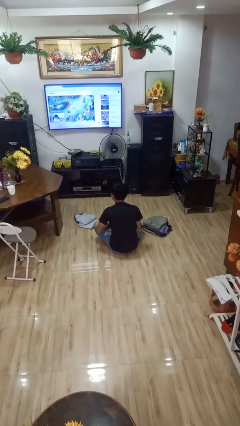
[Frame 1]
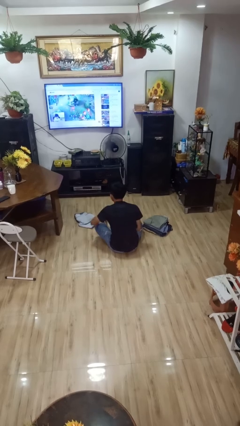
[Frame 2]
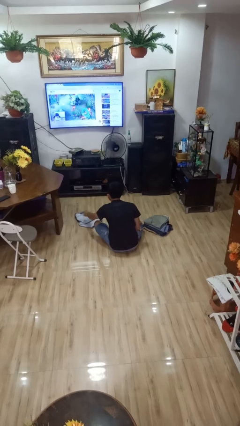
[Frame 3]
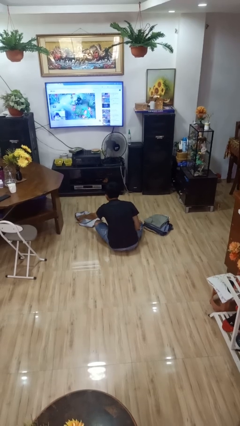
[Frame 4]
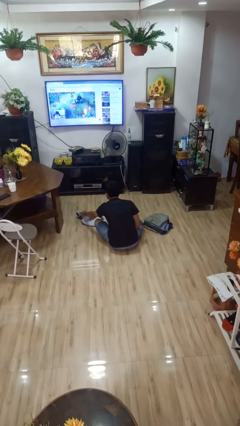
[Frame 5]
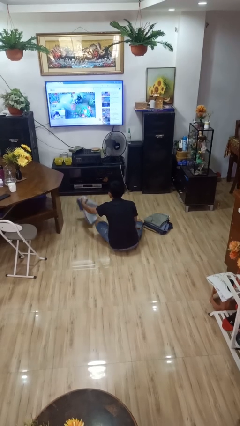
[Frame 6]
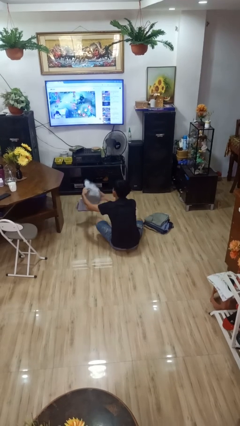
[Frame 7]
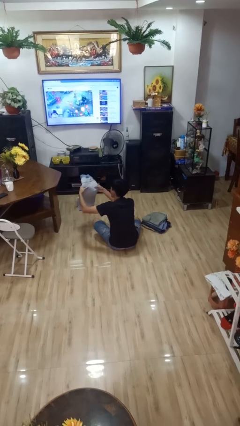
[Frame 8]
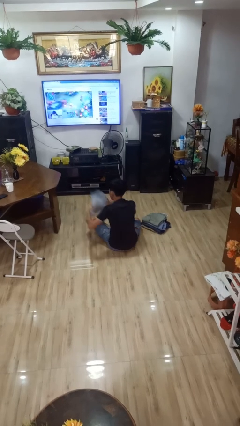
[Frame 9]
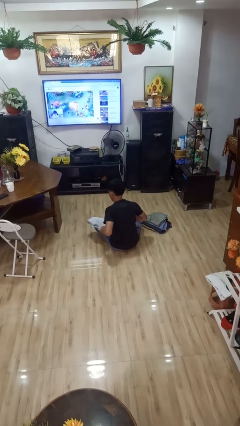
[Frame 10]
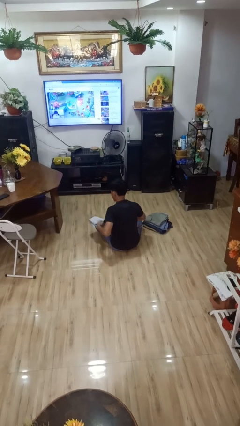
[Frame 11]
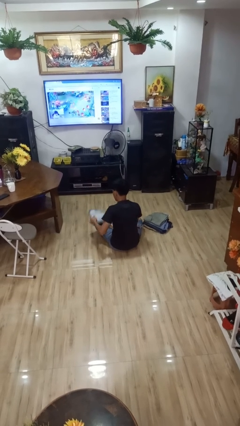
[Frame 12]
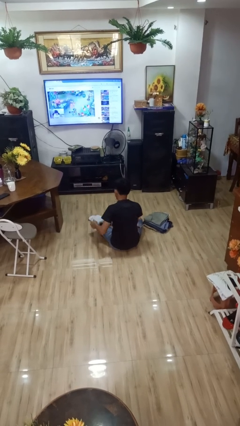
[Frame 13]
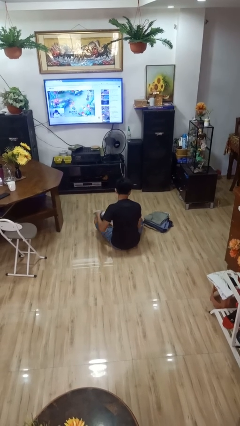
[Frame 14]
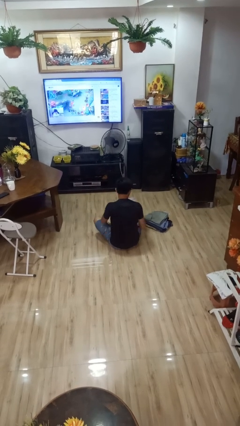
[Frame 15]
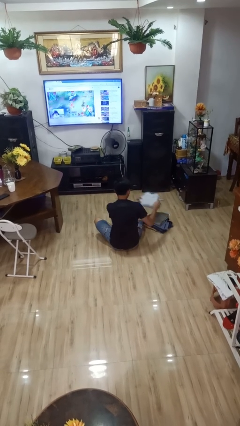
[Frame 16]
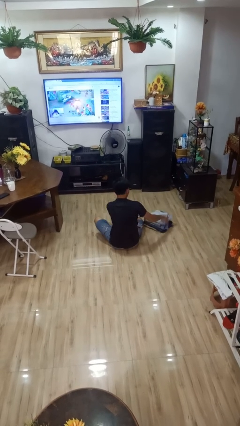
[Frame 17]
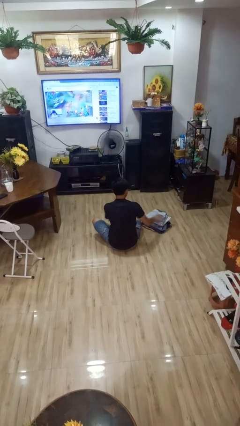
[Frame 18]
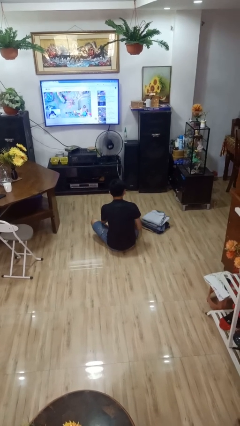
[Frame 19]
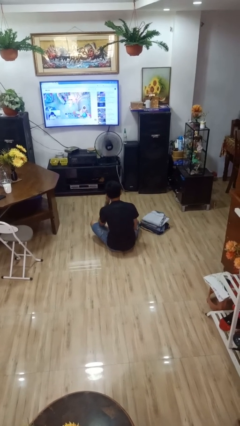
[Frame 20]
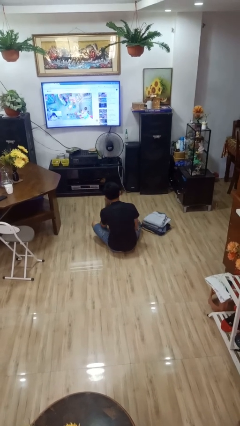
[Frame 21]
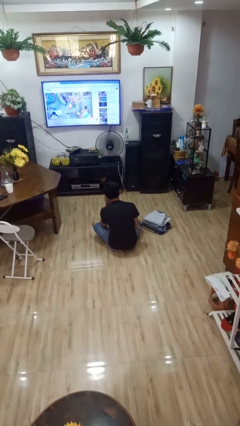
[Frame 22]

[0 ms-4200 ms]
person folds pants

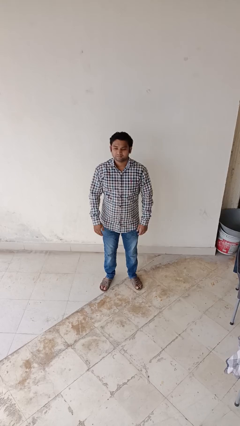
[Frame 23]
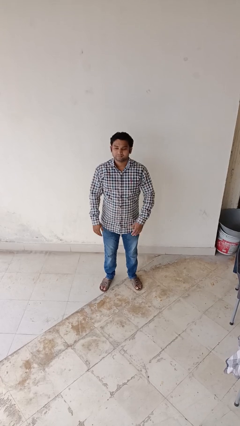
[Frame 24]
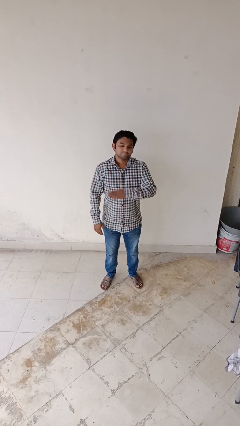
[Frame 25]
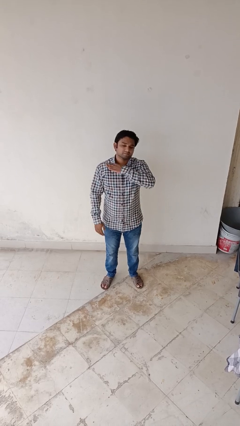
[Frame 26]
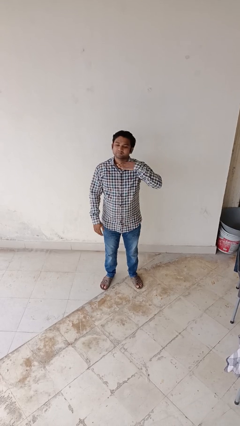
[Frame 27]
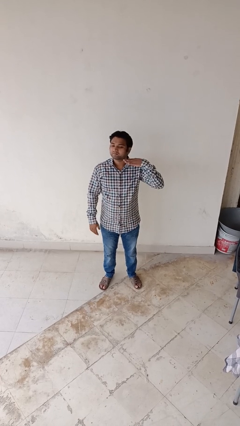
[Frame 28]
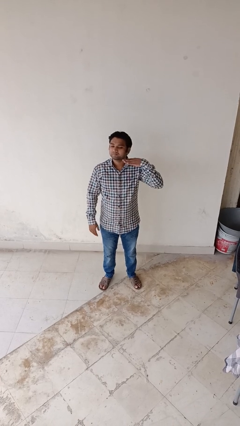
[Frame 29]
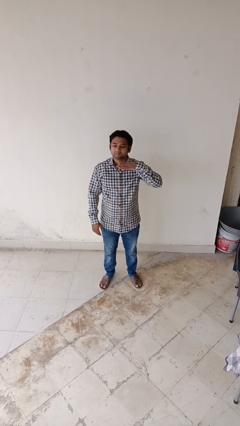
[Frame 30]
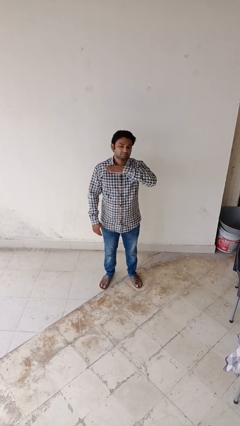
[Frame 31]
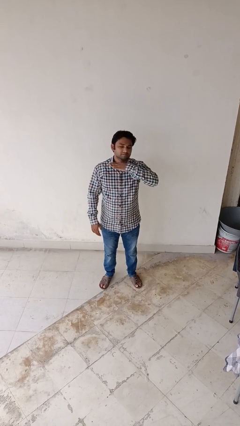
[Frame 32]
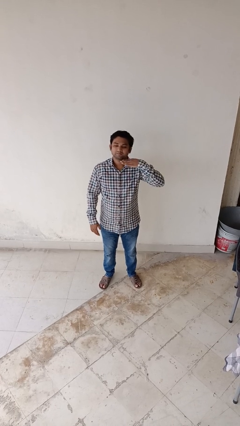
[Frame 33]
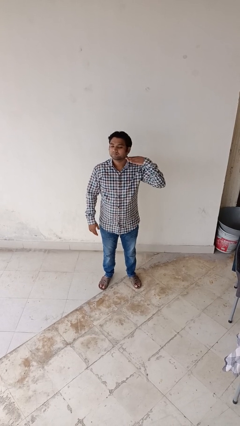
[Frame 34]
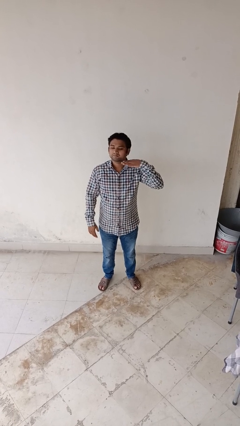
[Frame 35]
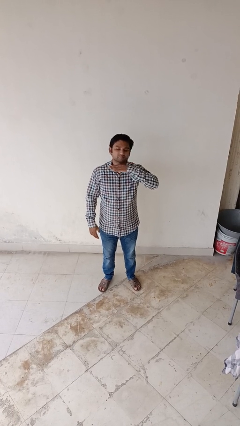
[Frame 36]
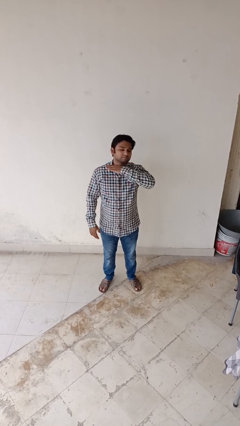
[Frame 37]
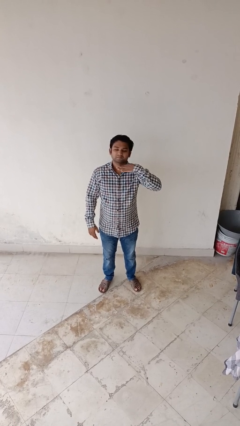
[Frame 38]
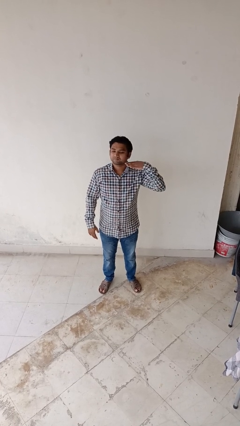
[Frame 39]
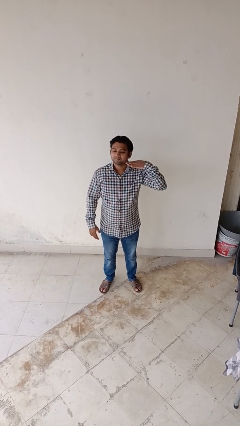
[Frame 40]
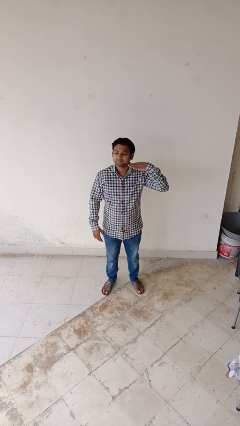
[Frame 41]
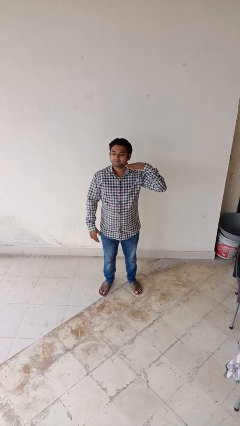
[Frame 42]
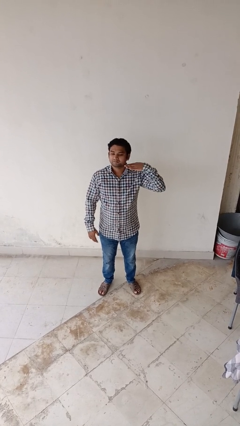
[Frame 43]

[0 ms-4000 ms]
person gestures cut

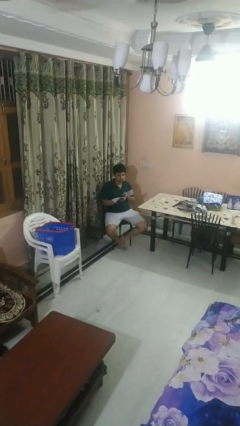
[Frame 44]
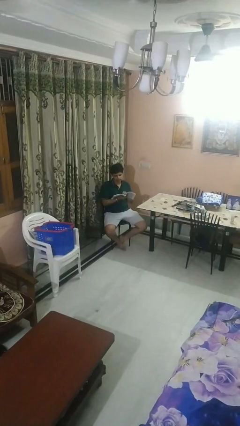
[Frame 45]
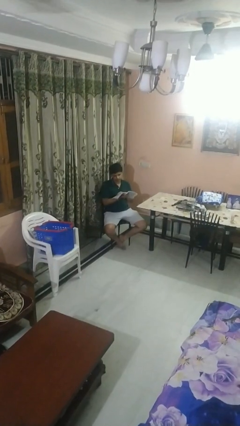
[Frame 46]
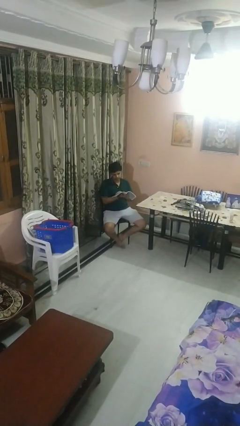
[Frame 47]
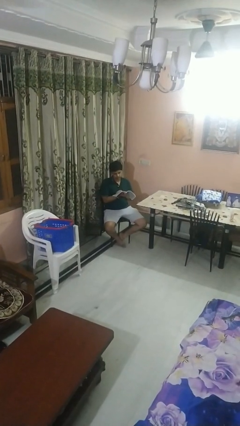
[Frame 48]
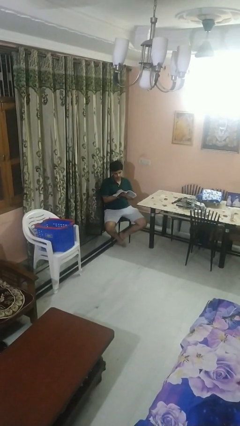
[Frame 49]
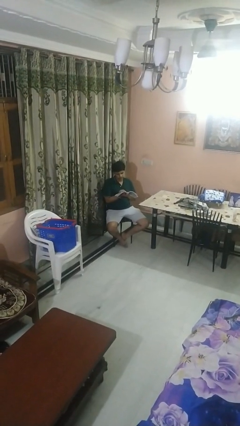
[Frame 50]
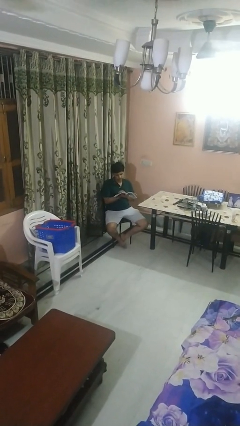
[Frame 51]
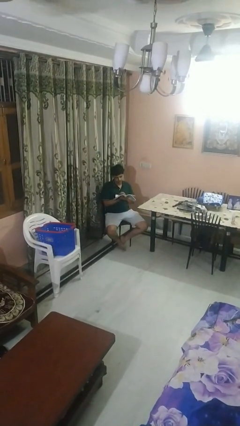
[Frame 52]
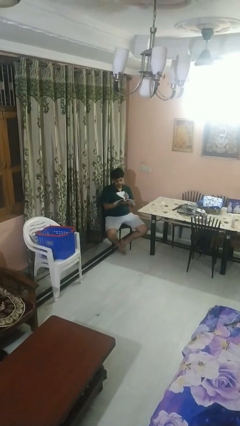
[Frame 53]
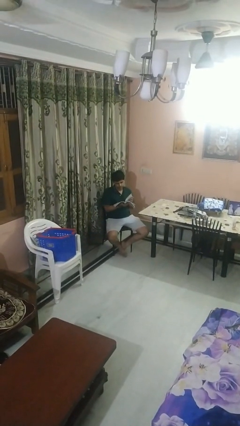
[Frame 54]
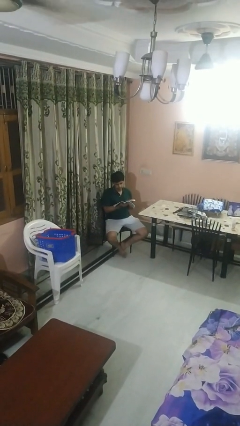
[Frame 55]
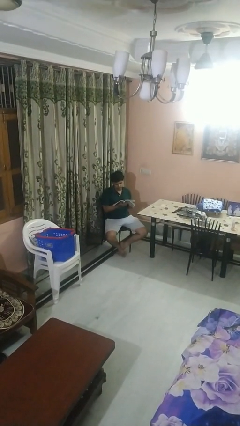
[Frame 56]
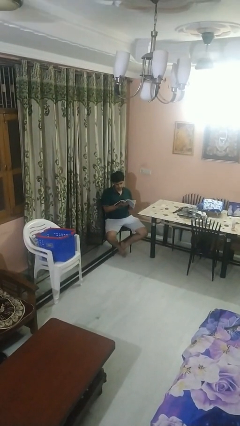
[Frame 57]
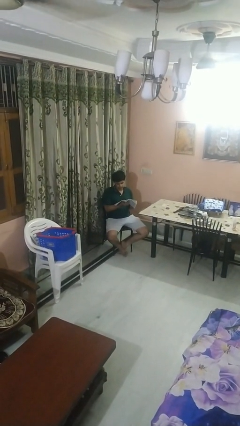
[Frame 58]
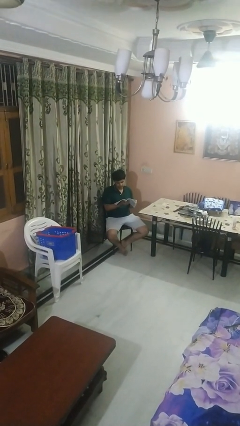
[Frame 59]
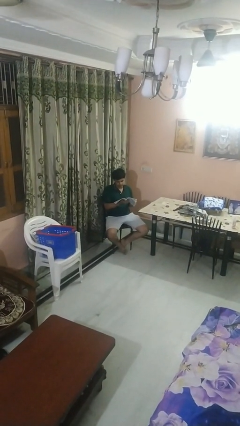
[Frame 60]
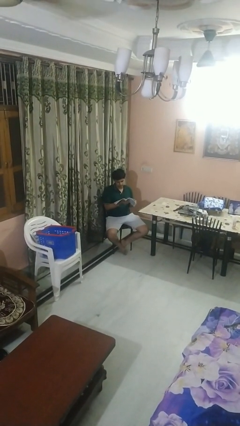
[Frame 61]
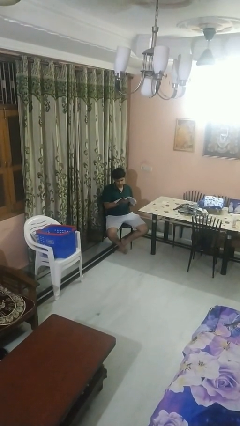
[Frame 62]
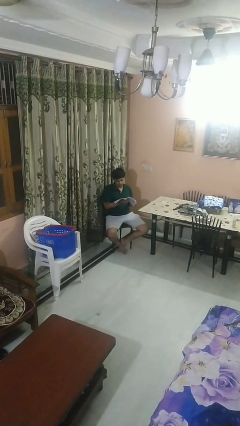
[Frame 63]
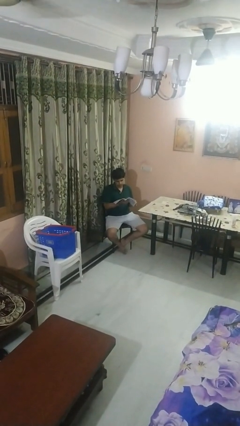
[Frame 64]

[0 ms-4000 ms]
person reads magazine

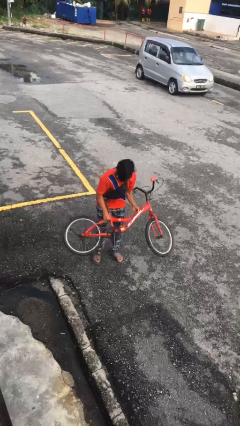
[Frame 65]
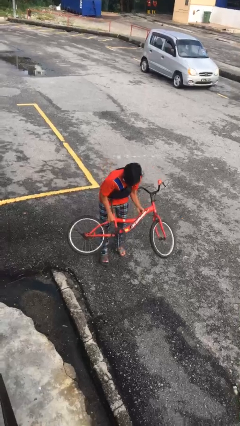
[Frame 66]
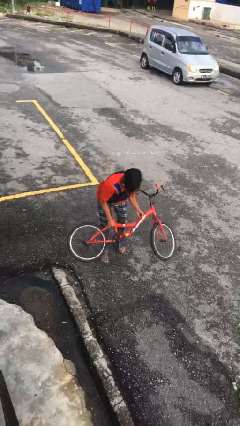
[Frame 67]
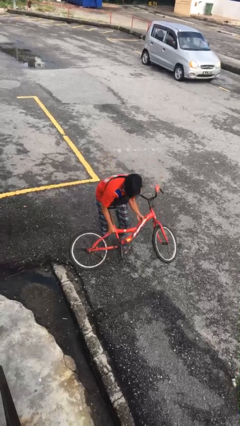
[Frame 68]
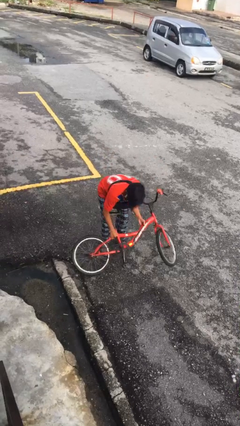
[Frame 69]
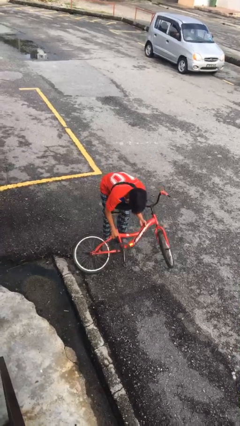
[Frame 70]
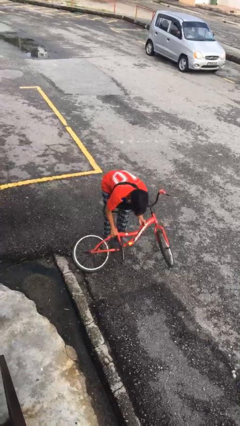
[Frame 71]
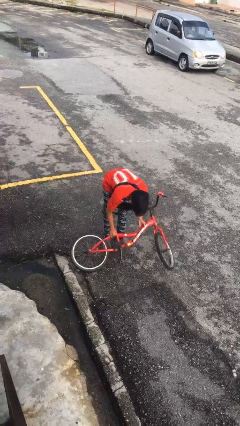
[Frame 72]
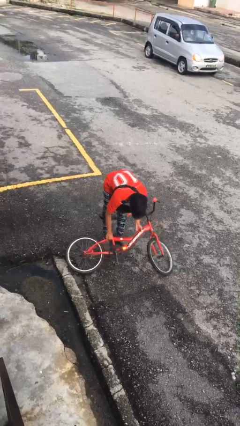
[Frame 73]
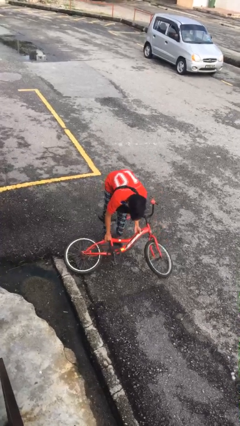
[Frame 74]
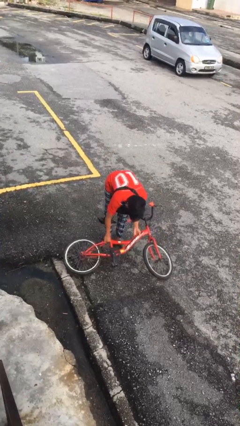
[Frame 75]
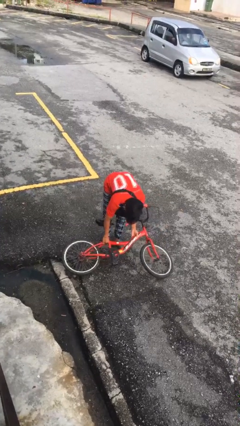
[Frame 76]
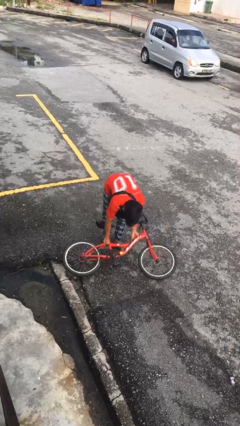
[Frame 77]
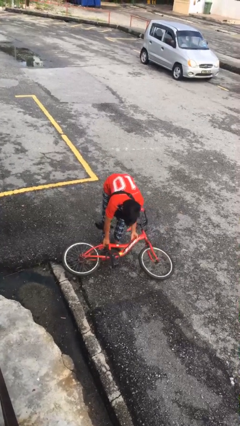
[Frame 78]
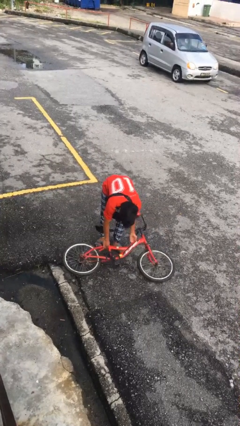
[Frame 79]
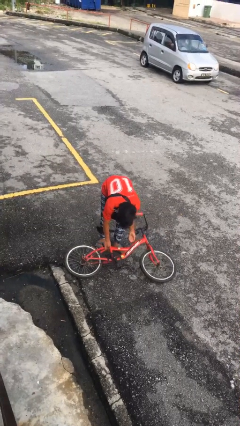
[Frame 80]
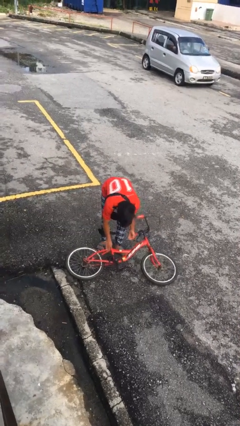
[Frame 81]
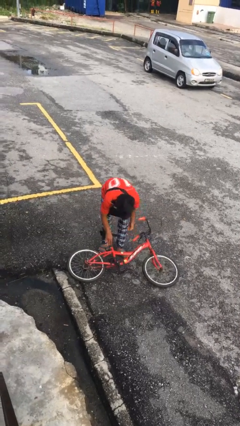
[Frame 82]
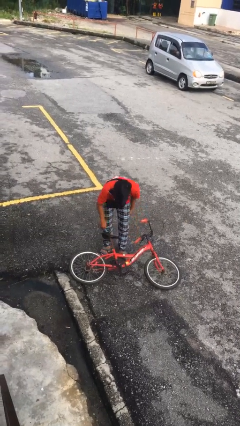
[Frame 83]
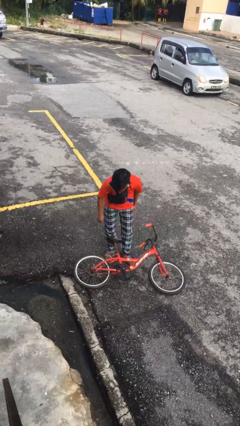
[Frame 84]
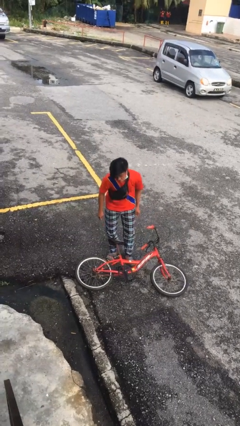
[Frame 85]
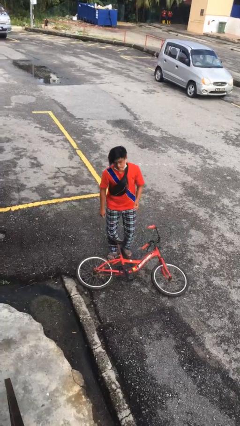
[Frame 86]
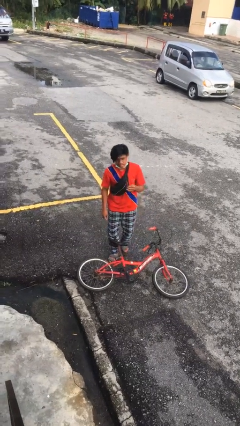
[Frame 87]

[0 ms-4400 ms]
person puts down object on floor

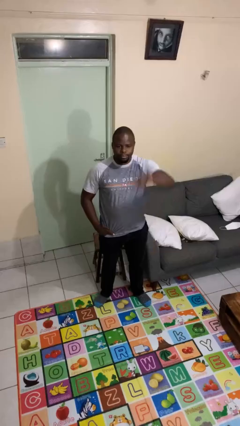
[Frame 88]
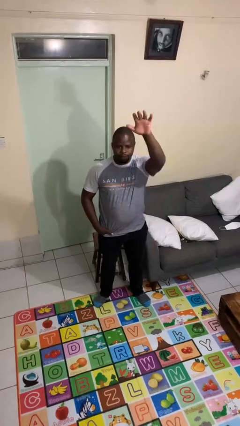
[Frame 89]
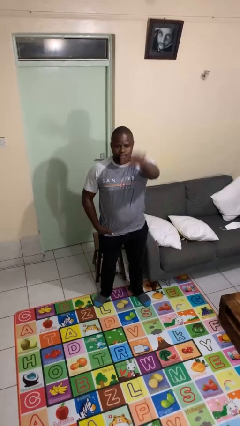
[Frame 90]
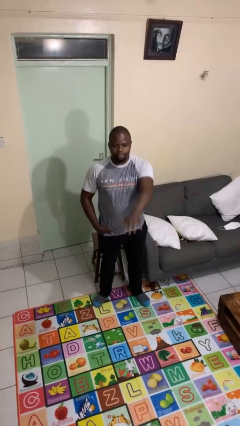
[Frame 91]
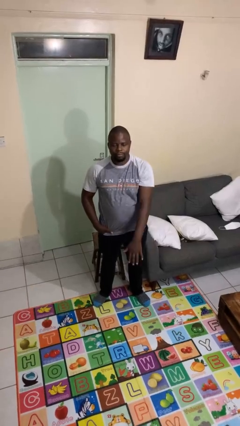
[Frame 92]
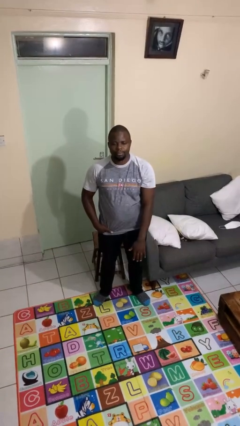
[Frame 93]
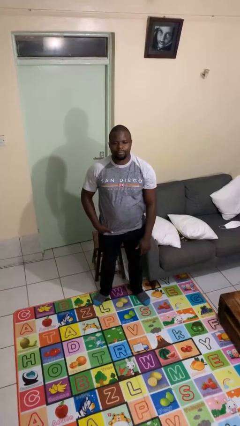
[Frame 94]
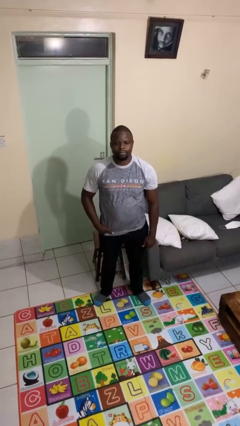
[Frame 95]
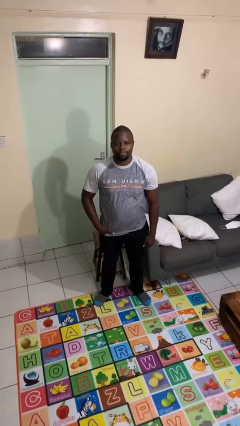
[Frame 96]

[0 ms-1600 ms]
person gestures swipe down
